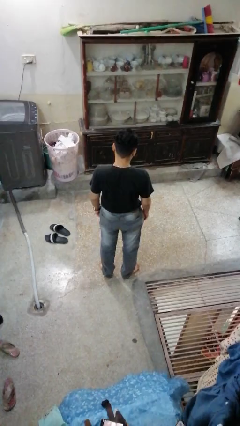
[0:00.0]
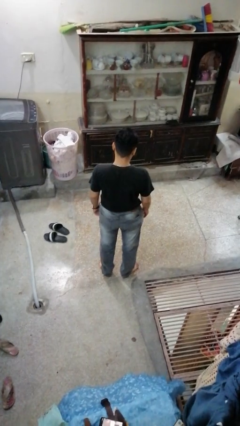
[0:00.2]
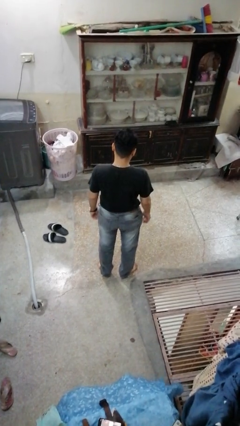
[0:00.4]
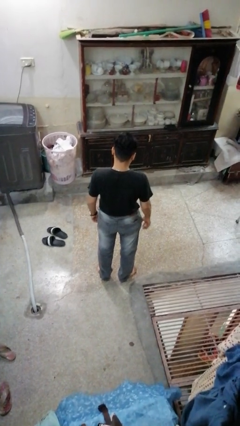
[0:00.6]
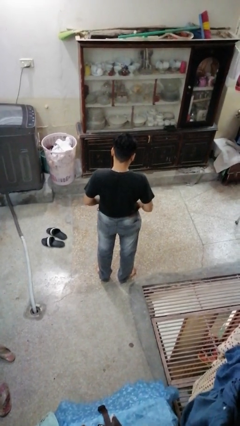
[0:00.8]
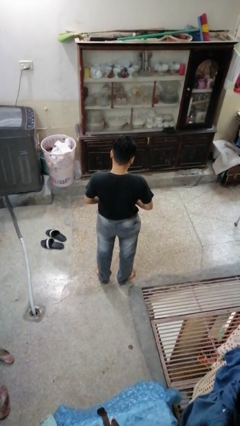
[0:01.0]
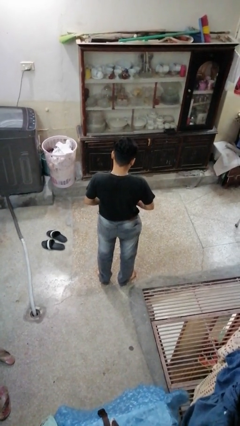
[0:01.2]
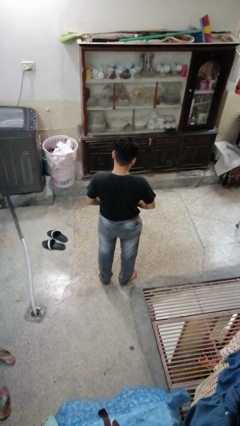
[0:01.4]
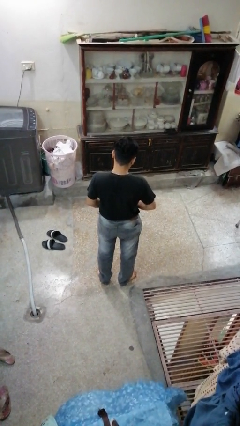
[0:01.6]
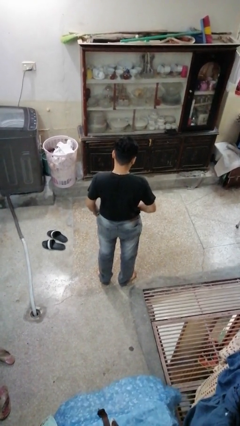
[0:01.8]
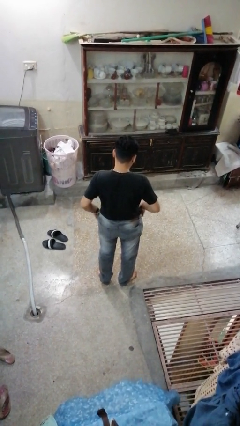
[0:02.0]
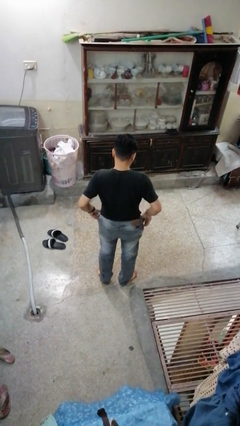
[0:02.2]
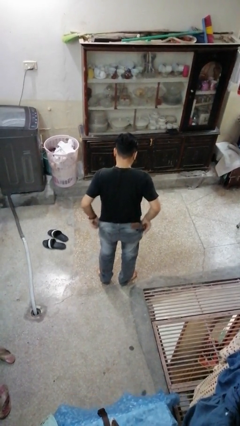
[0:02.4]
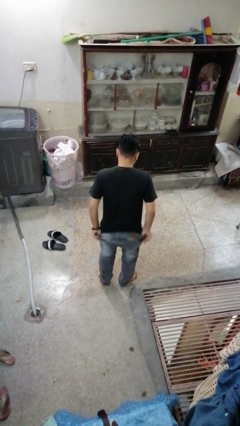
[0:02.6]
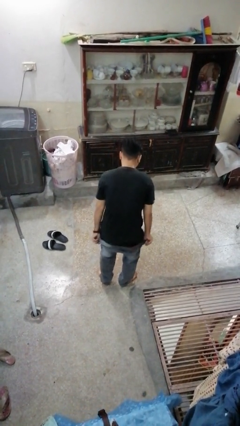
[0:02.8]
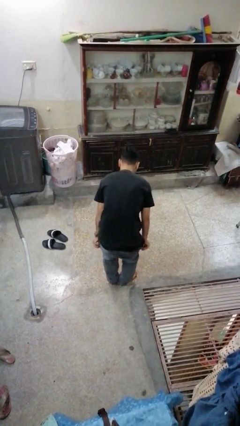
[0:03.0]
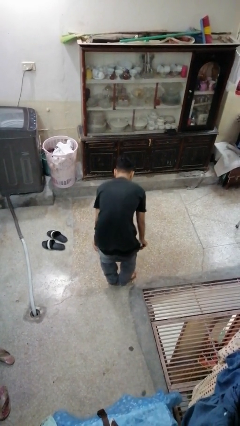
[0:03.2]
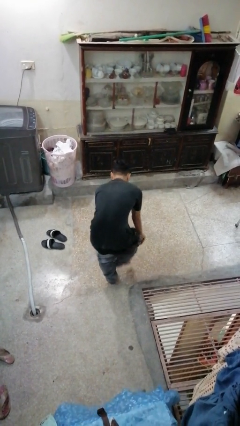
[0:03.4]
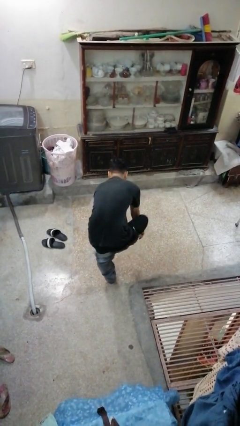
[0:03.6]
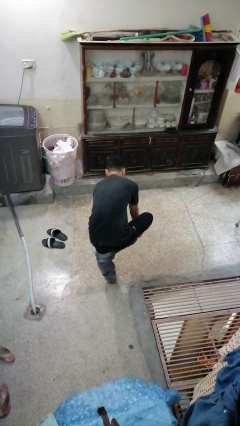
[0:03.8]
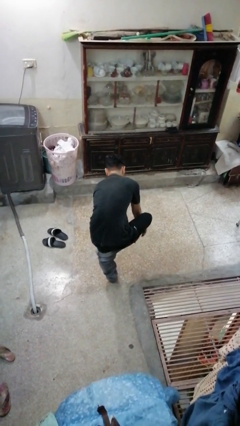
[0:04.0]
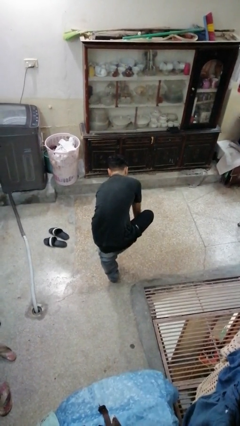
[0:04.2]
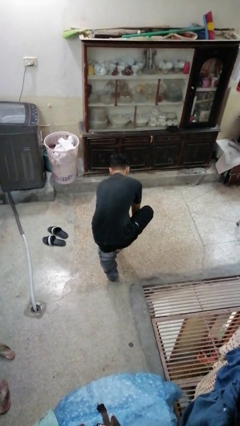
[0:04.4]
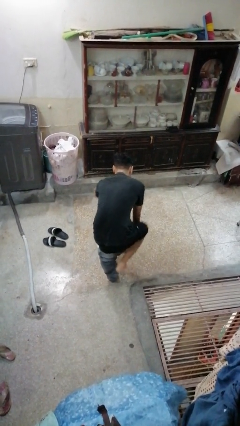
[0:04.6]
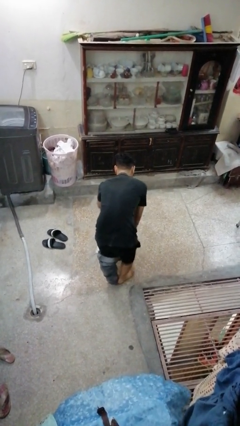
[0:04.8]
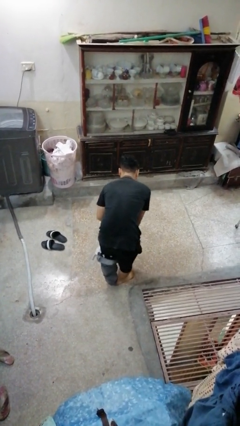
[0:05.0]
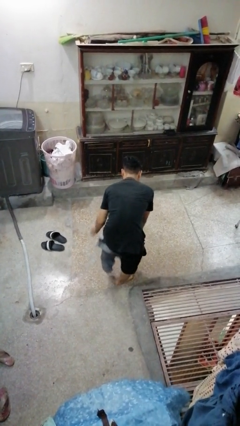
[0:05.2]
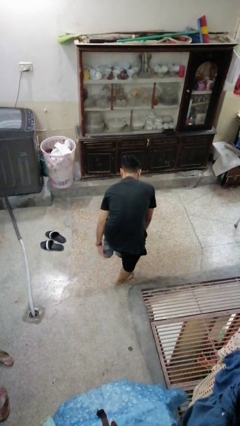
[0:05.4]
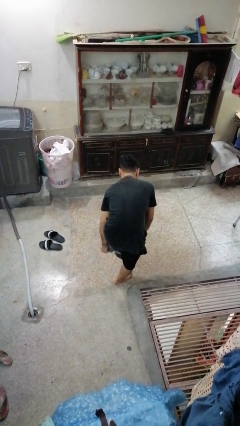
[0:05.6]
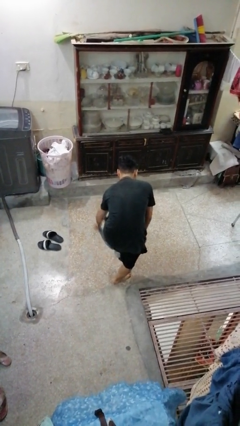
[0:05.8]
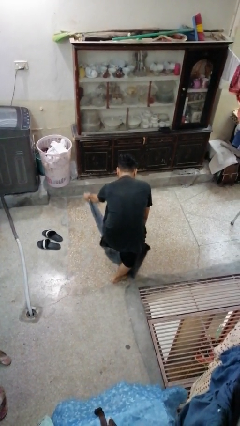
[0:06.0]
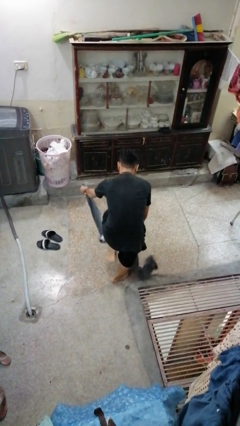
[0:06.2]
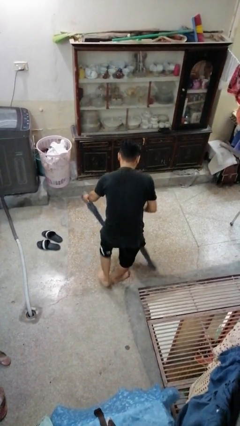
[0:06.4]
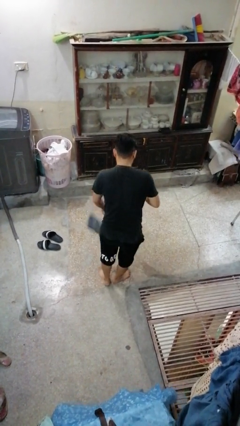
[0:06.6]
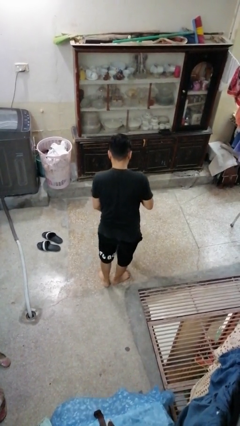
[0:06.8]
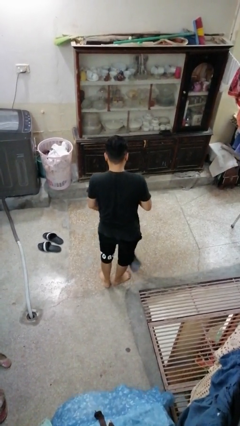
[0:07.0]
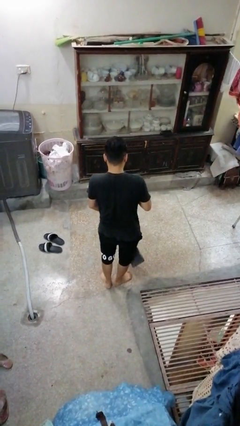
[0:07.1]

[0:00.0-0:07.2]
person takes off pants

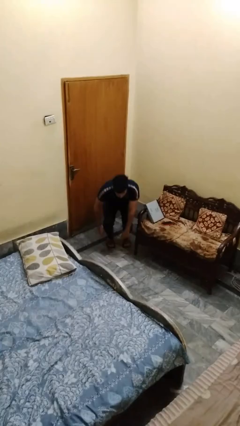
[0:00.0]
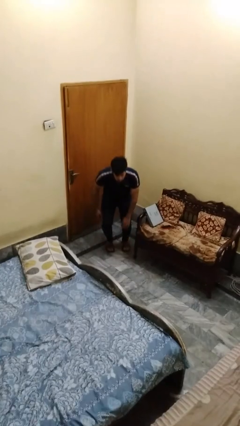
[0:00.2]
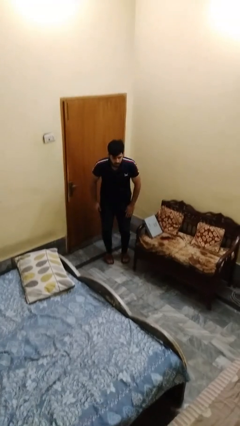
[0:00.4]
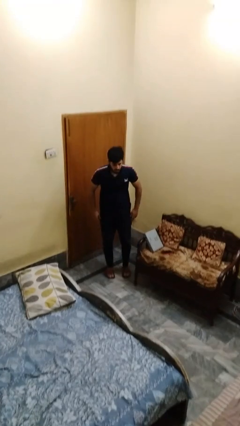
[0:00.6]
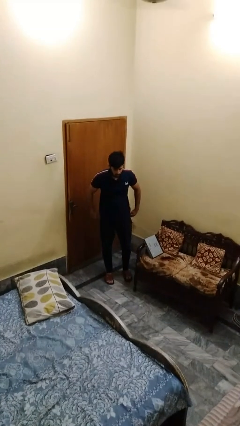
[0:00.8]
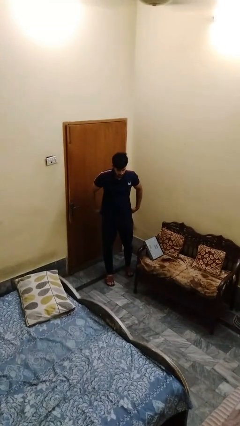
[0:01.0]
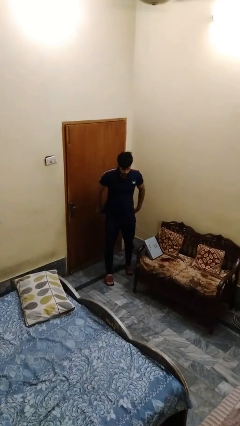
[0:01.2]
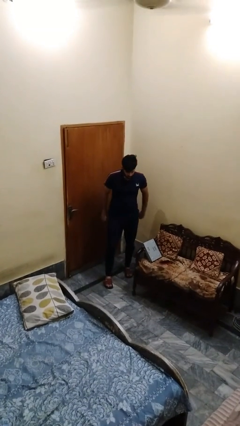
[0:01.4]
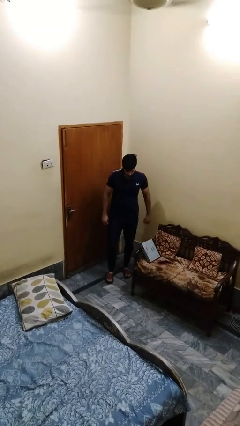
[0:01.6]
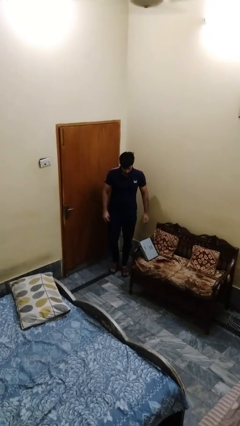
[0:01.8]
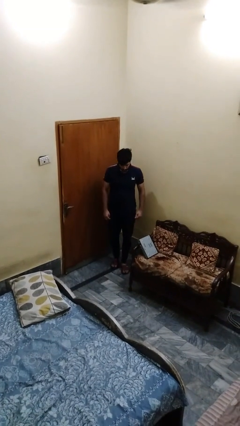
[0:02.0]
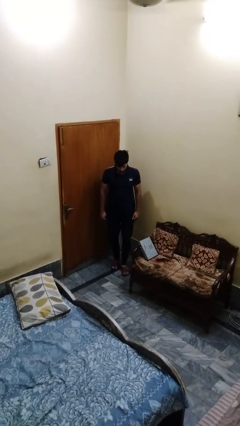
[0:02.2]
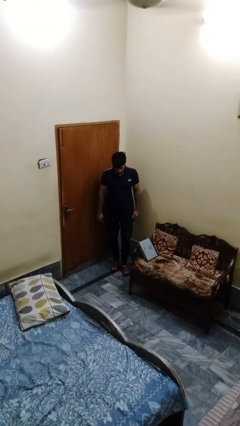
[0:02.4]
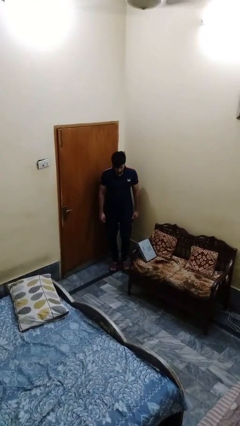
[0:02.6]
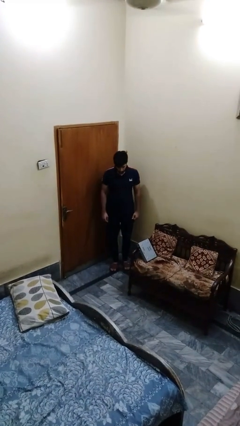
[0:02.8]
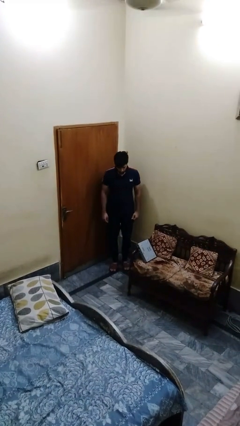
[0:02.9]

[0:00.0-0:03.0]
person stands up from floor

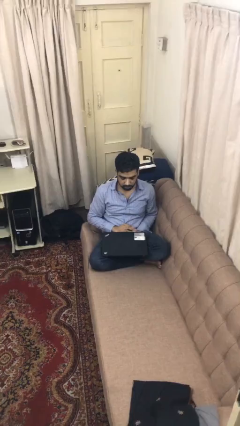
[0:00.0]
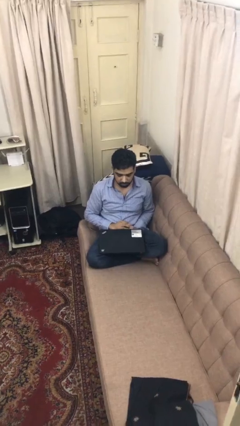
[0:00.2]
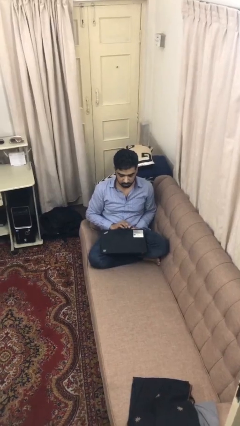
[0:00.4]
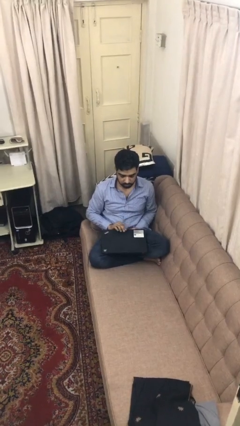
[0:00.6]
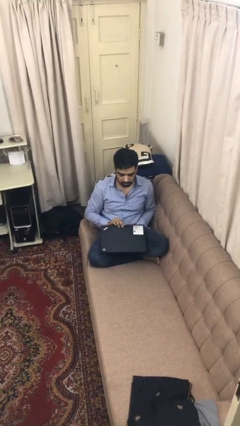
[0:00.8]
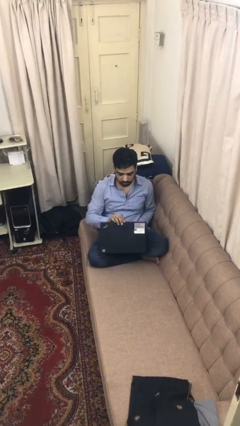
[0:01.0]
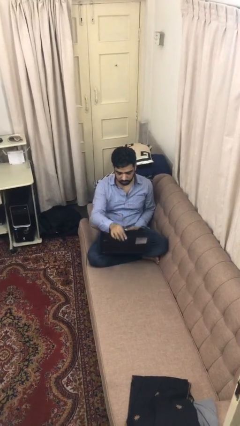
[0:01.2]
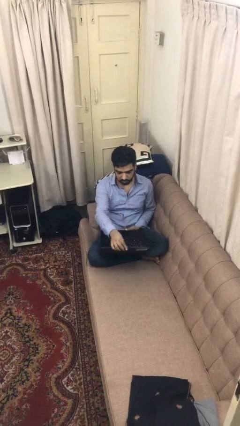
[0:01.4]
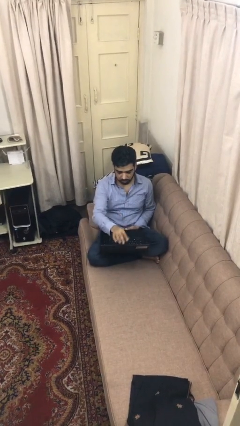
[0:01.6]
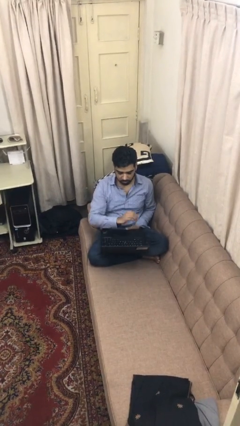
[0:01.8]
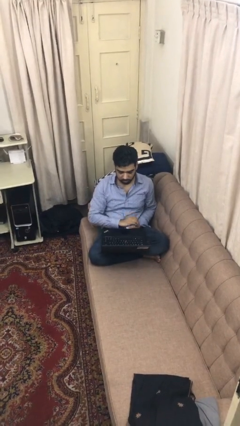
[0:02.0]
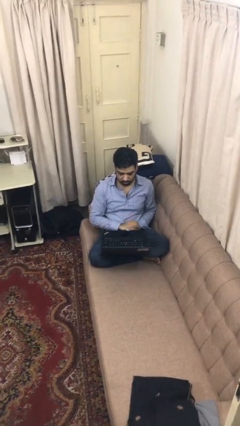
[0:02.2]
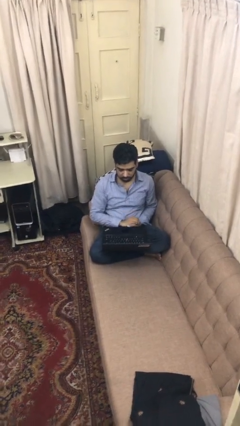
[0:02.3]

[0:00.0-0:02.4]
person opens laptop

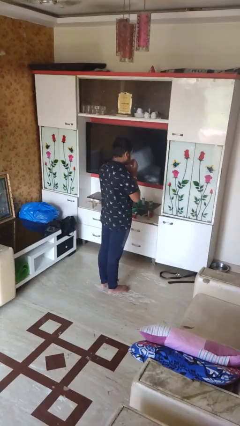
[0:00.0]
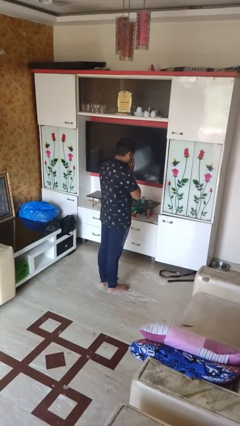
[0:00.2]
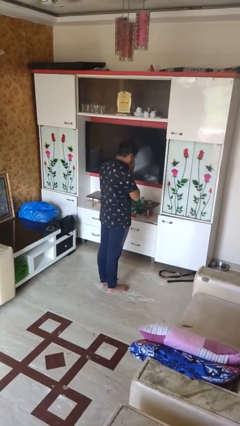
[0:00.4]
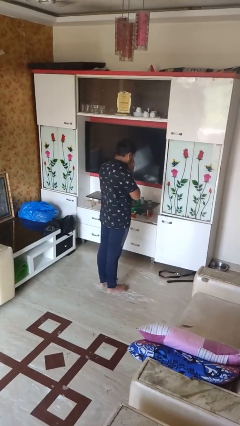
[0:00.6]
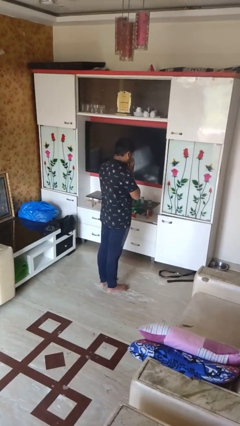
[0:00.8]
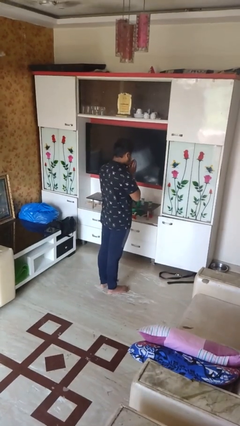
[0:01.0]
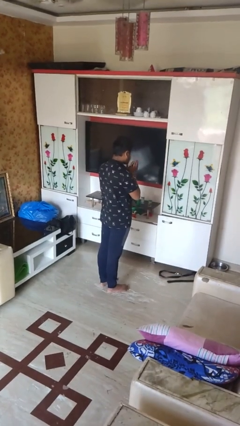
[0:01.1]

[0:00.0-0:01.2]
person sneezes into hand

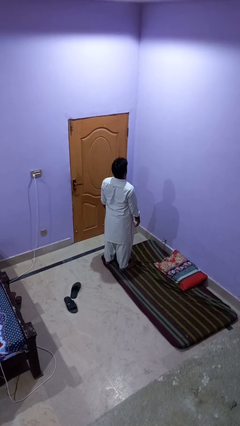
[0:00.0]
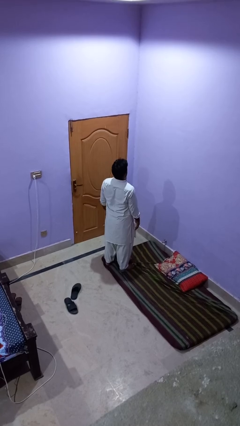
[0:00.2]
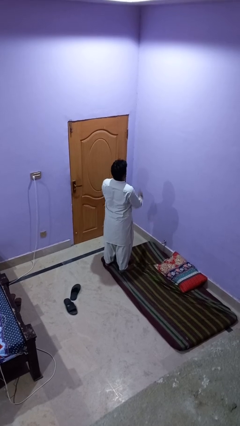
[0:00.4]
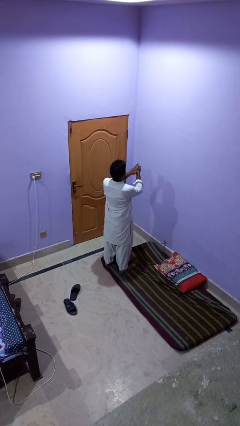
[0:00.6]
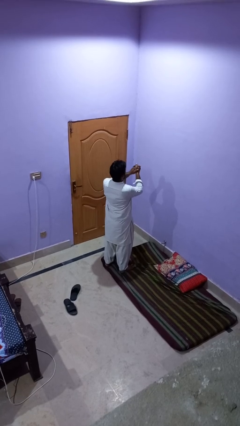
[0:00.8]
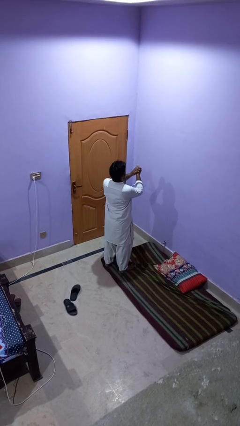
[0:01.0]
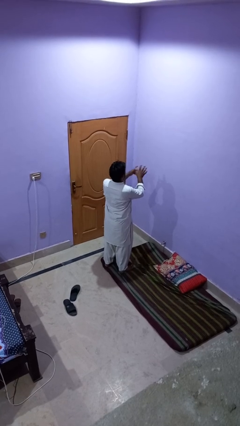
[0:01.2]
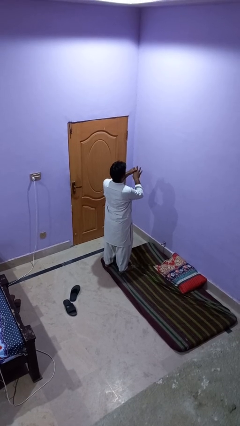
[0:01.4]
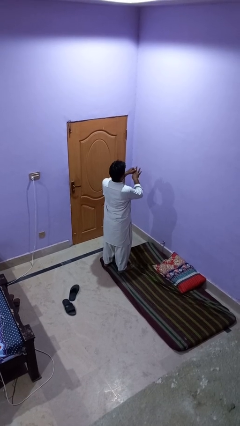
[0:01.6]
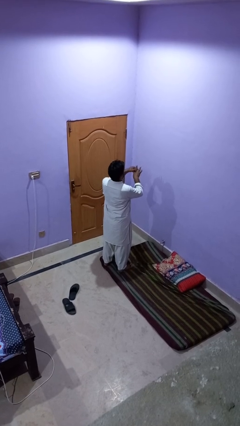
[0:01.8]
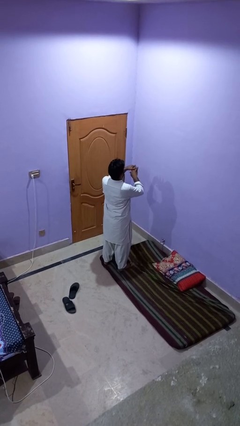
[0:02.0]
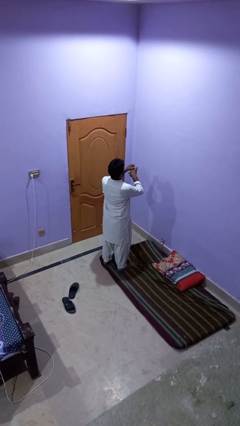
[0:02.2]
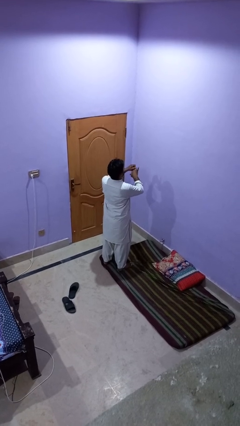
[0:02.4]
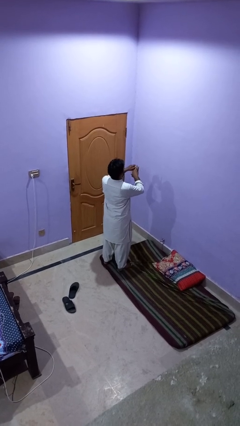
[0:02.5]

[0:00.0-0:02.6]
person snaps fingers

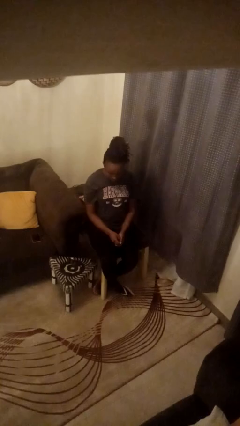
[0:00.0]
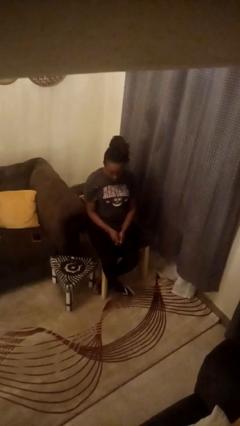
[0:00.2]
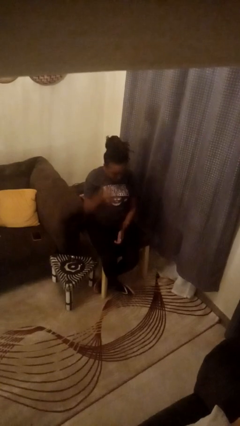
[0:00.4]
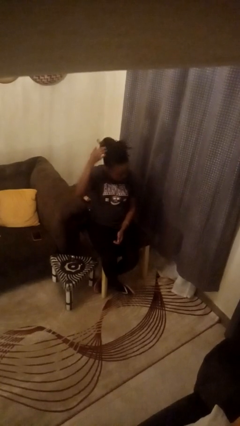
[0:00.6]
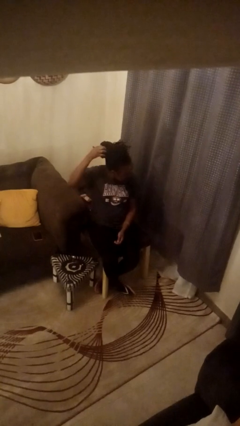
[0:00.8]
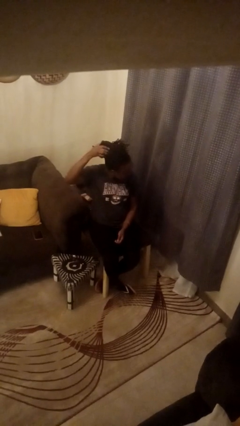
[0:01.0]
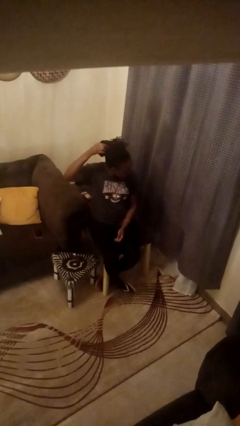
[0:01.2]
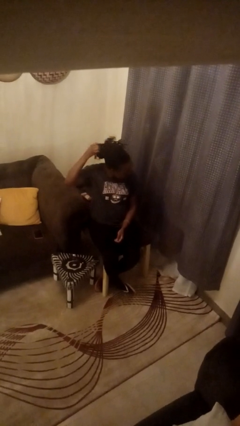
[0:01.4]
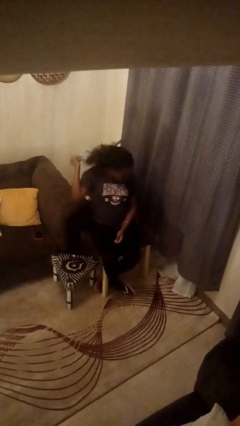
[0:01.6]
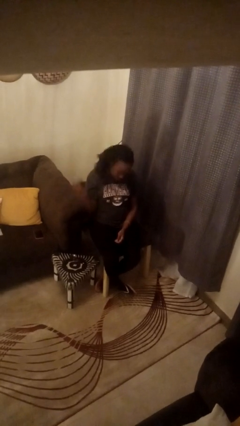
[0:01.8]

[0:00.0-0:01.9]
person takes off hairtie
